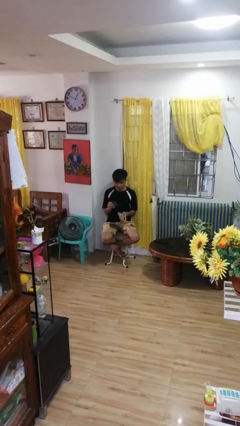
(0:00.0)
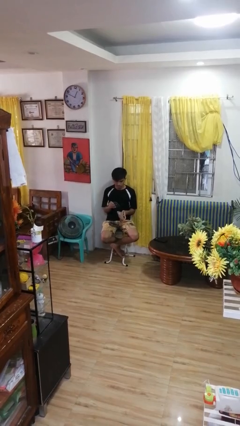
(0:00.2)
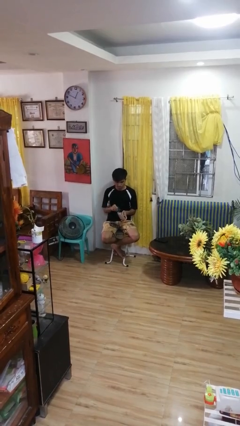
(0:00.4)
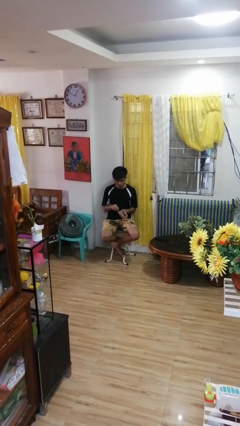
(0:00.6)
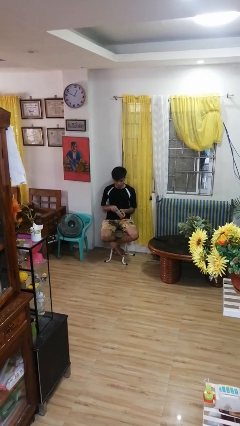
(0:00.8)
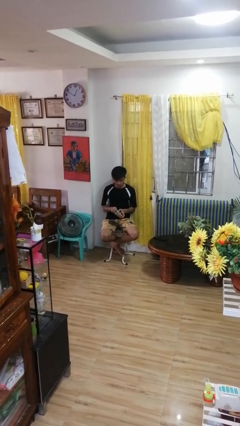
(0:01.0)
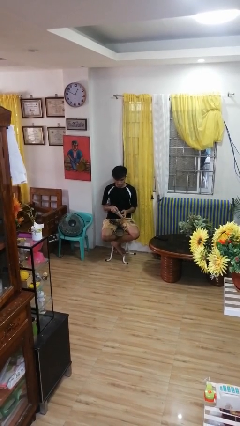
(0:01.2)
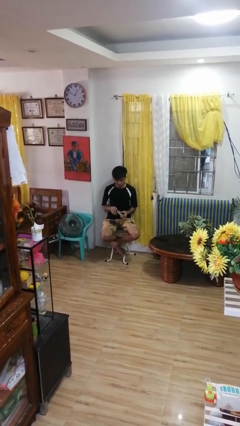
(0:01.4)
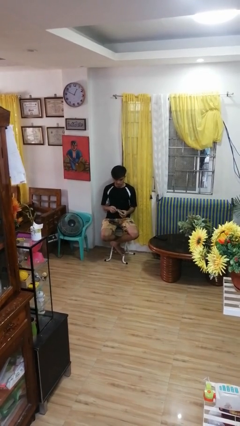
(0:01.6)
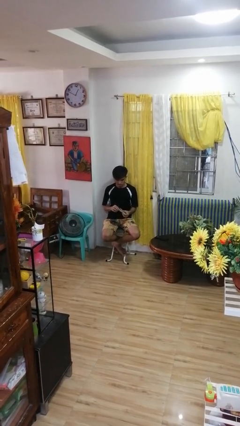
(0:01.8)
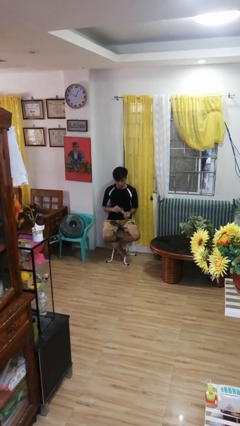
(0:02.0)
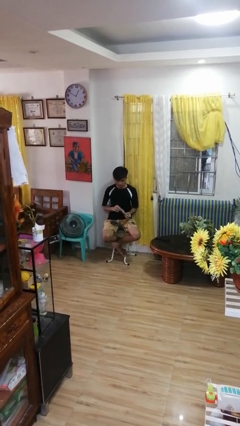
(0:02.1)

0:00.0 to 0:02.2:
person puts object into purse

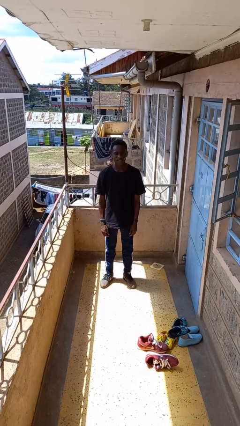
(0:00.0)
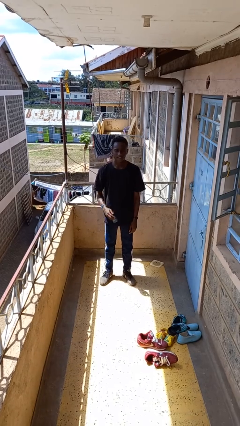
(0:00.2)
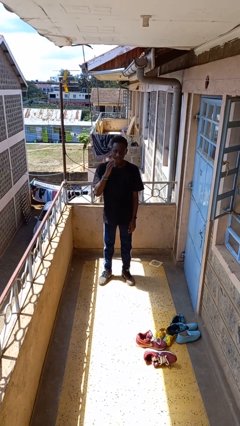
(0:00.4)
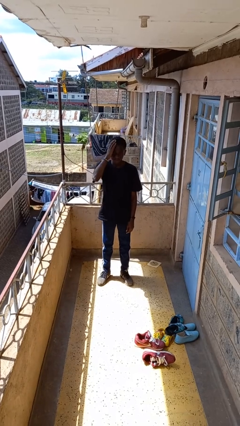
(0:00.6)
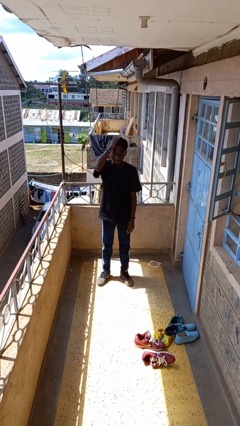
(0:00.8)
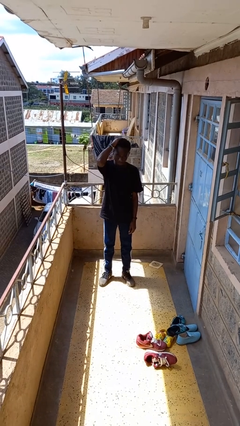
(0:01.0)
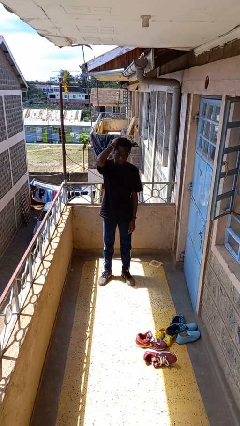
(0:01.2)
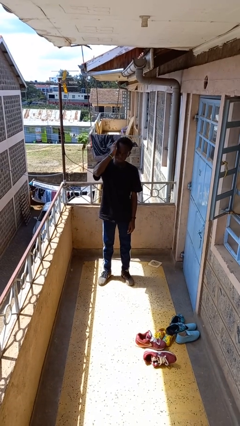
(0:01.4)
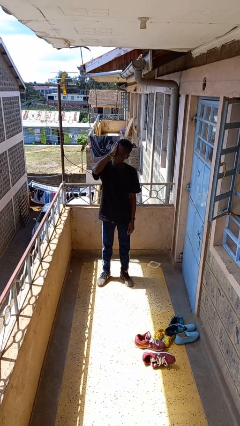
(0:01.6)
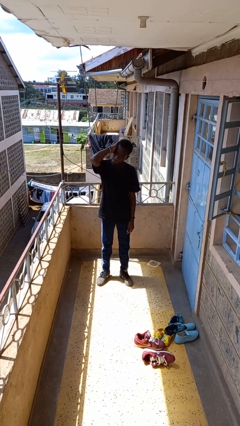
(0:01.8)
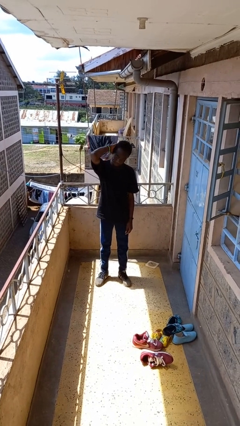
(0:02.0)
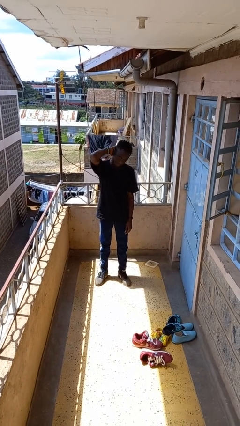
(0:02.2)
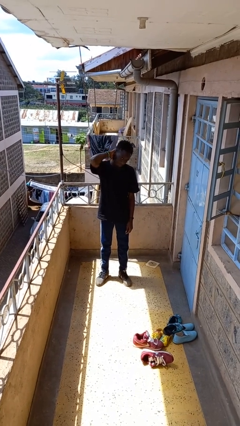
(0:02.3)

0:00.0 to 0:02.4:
person strokes hair

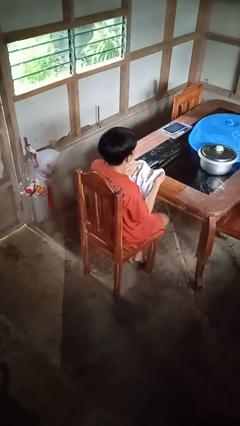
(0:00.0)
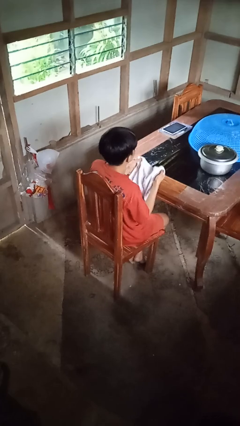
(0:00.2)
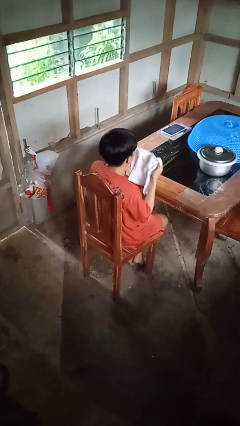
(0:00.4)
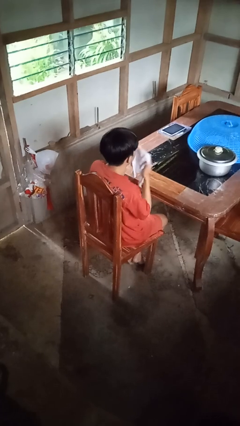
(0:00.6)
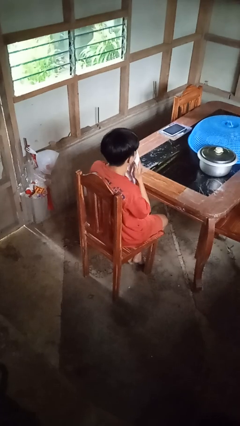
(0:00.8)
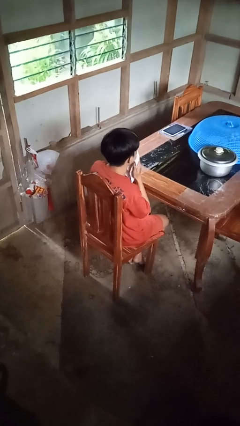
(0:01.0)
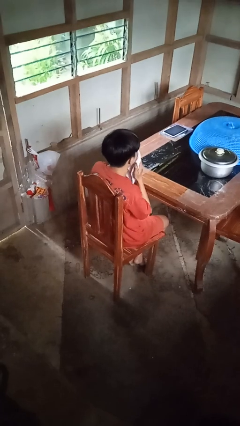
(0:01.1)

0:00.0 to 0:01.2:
person wipes mouth with napkin

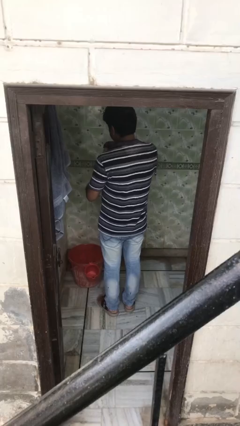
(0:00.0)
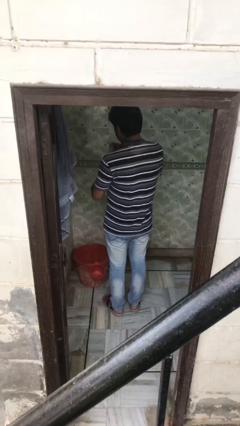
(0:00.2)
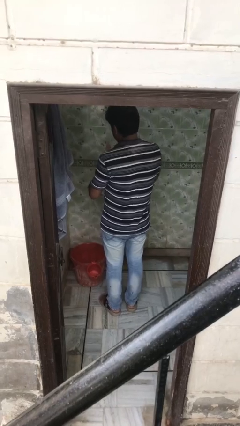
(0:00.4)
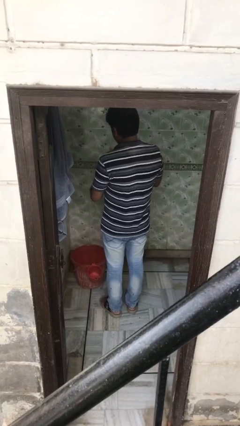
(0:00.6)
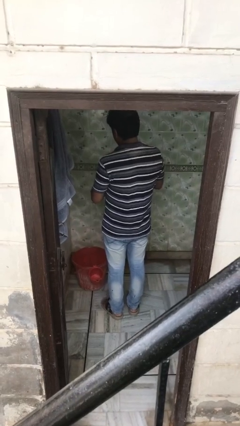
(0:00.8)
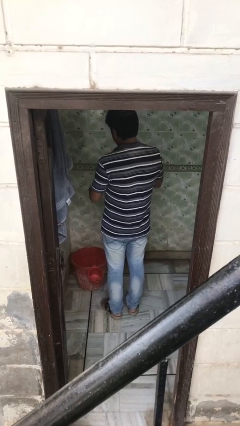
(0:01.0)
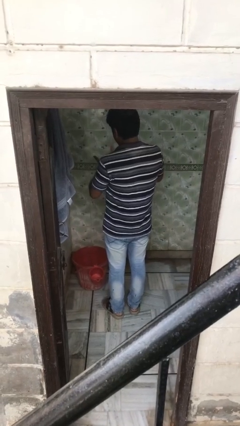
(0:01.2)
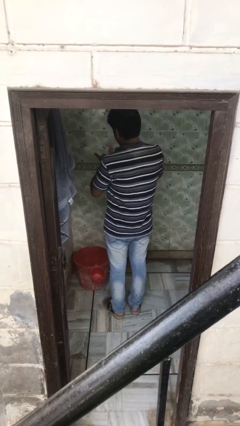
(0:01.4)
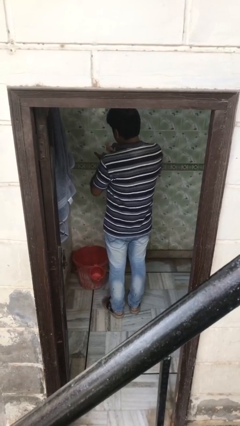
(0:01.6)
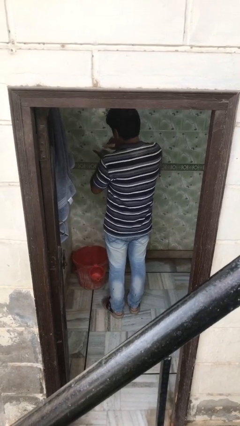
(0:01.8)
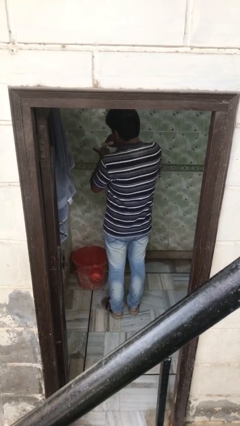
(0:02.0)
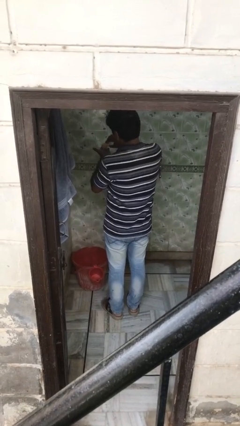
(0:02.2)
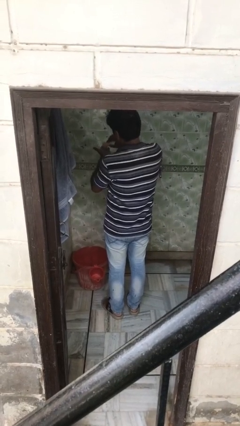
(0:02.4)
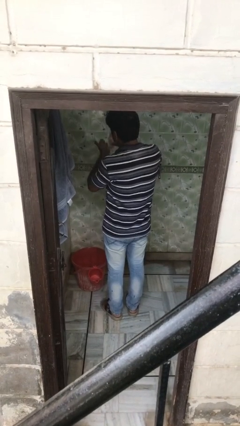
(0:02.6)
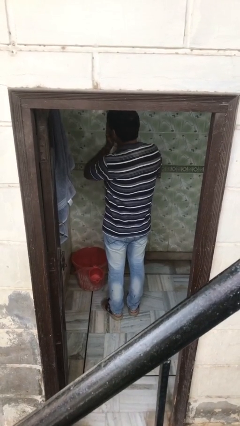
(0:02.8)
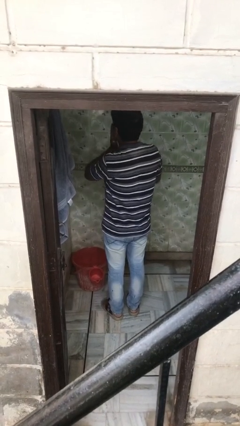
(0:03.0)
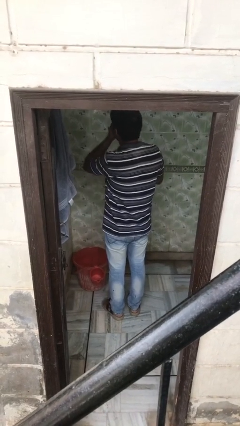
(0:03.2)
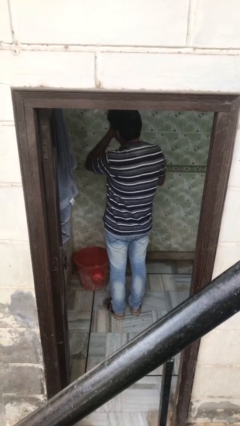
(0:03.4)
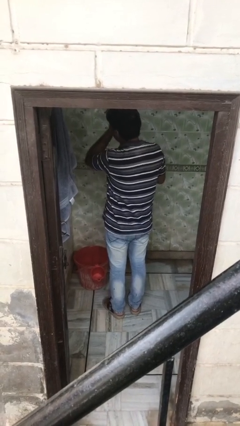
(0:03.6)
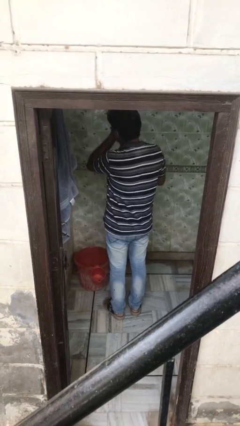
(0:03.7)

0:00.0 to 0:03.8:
person applies facial moisturizer

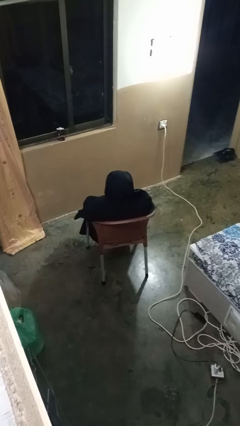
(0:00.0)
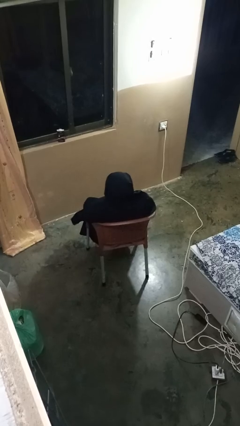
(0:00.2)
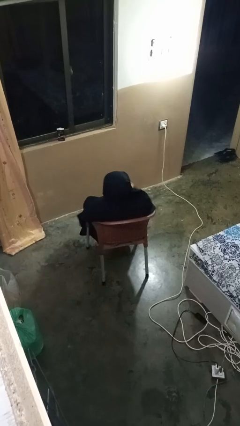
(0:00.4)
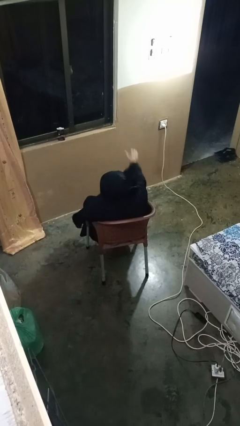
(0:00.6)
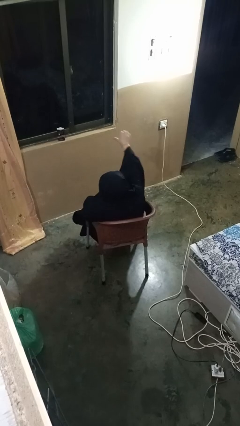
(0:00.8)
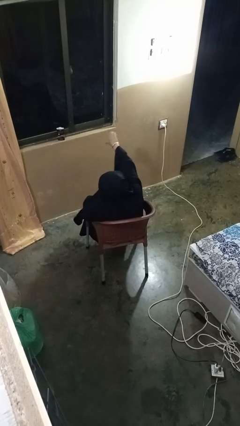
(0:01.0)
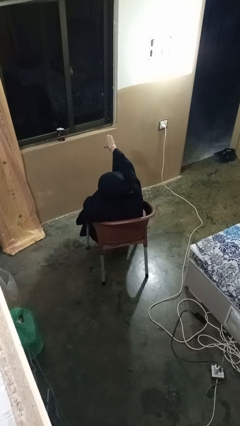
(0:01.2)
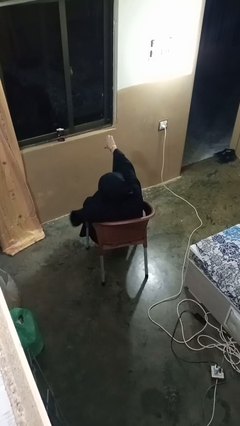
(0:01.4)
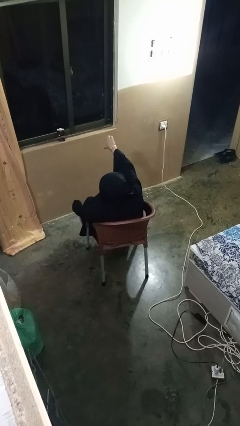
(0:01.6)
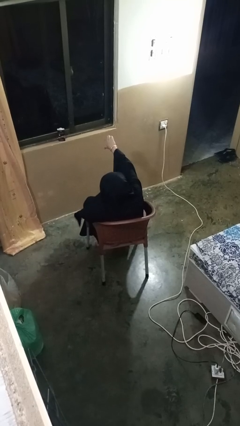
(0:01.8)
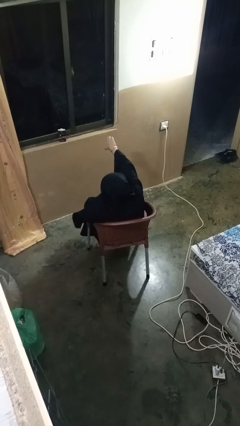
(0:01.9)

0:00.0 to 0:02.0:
person gestures thumbs down

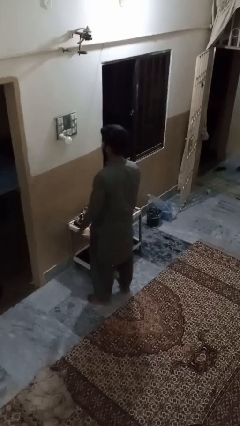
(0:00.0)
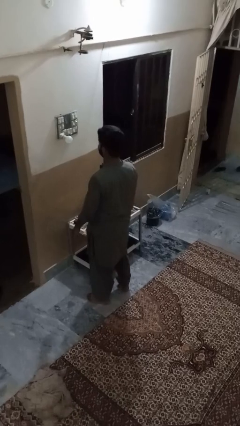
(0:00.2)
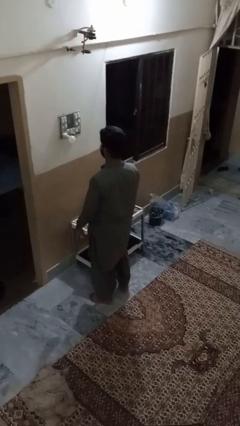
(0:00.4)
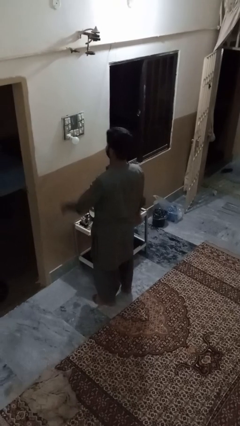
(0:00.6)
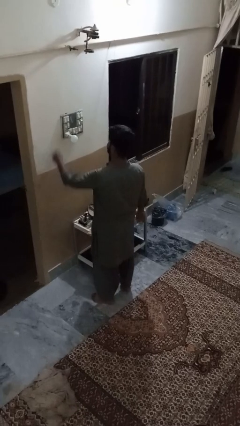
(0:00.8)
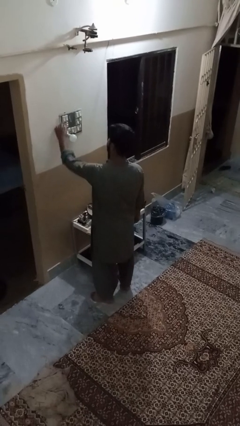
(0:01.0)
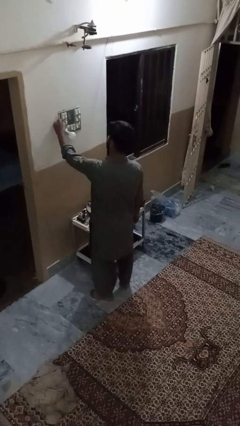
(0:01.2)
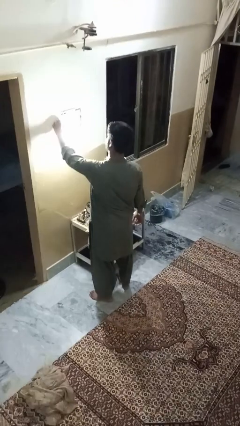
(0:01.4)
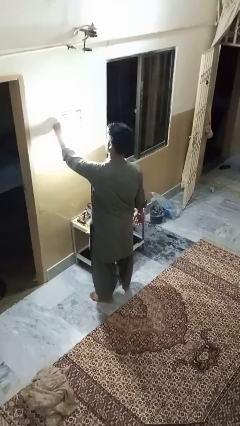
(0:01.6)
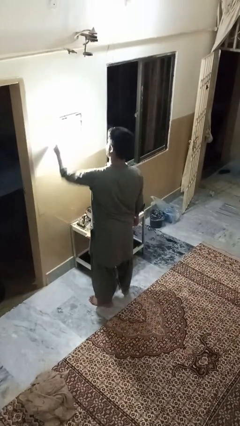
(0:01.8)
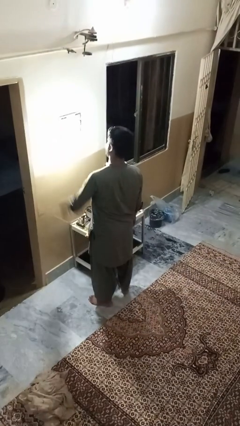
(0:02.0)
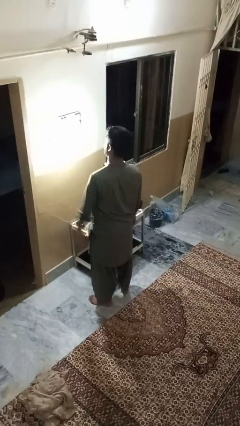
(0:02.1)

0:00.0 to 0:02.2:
person turns on lamp

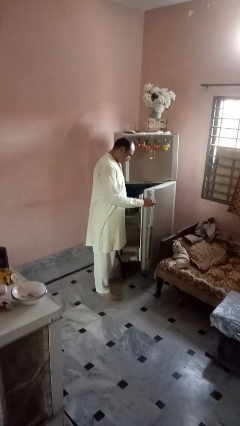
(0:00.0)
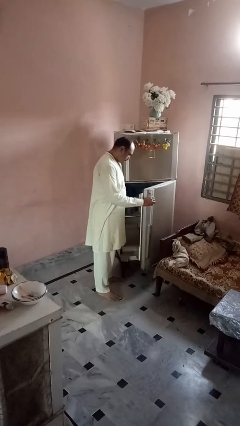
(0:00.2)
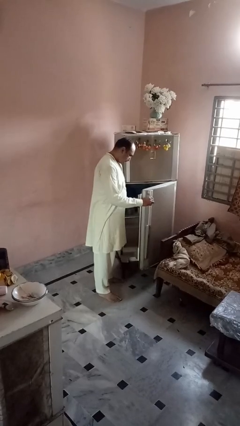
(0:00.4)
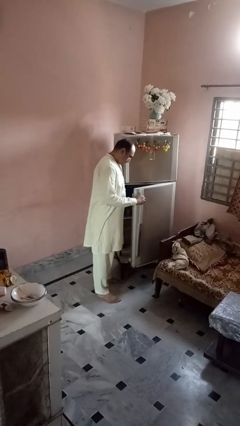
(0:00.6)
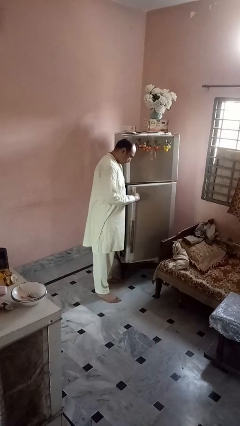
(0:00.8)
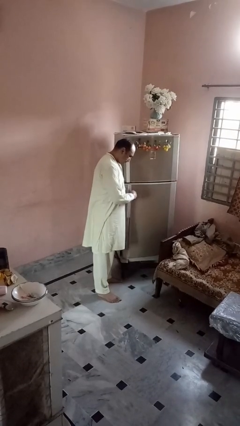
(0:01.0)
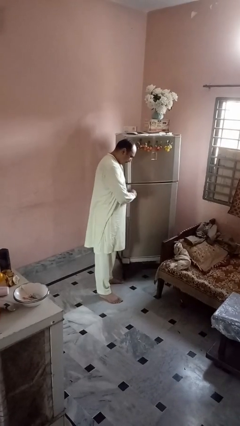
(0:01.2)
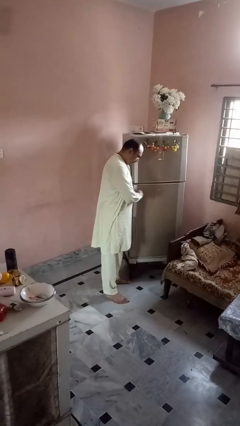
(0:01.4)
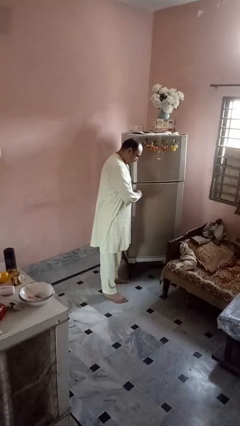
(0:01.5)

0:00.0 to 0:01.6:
person closes refrigerator

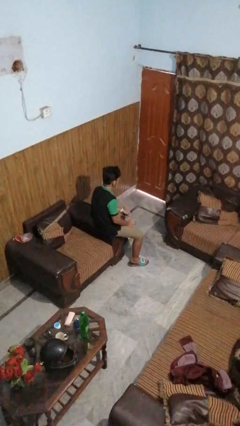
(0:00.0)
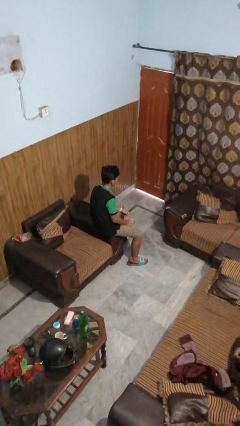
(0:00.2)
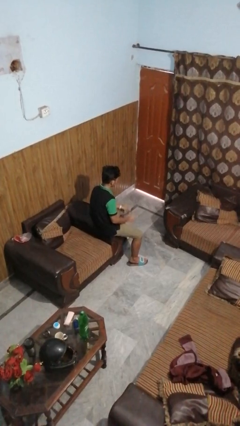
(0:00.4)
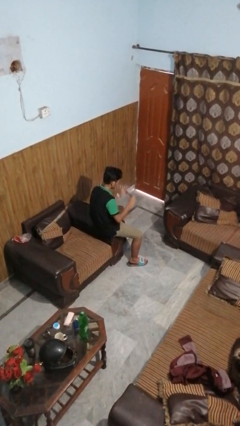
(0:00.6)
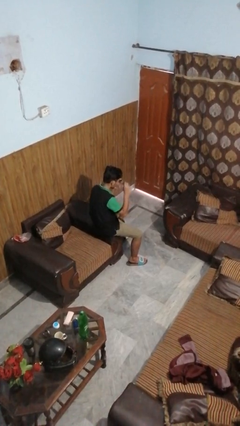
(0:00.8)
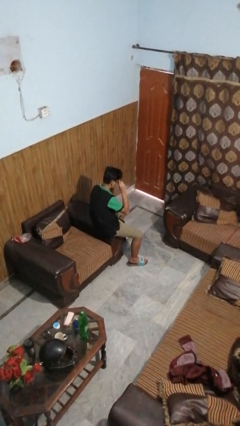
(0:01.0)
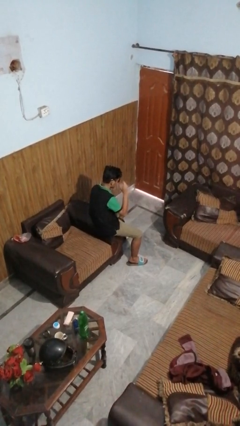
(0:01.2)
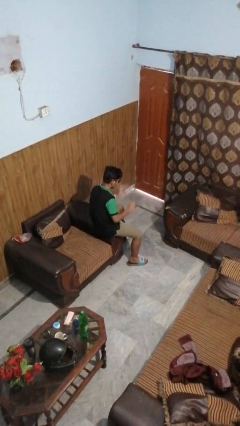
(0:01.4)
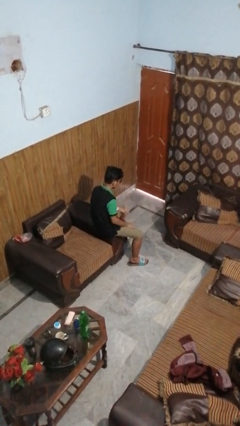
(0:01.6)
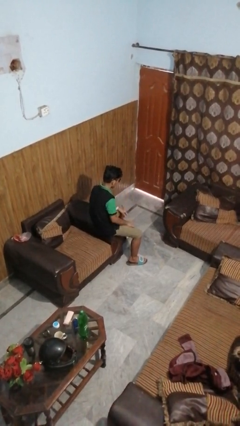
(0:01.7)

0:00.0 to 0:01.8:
person puts on sunglasses
